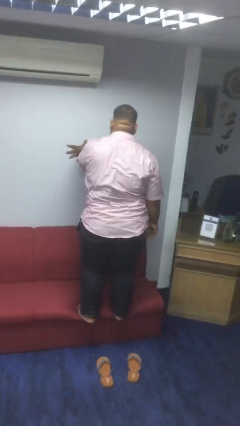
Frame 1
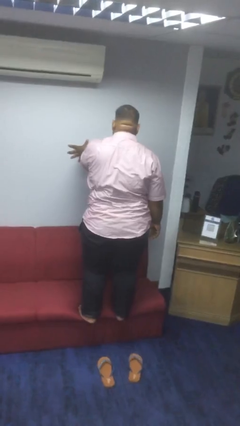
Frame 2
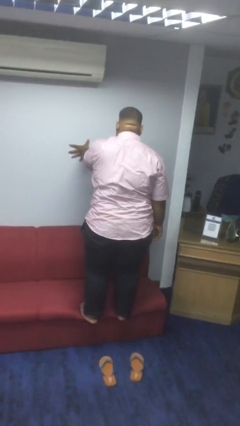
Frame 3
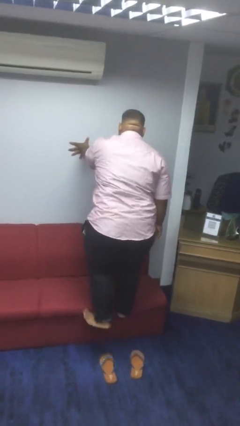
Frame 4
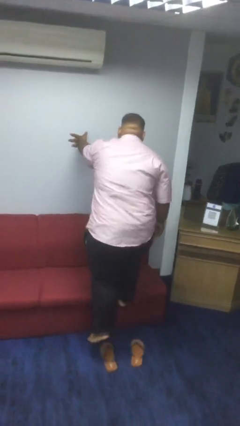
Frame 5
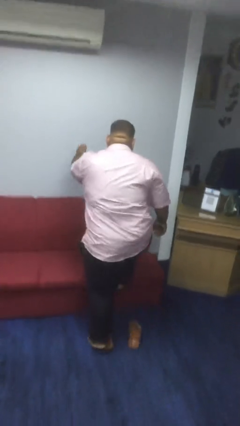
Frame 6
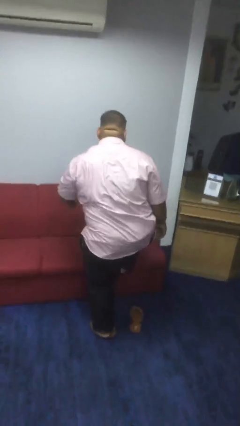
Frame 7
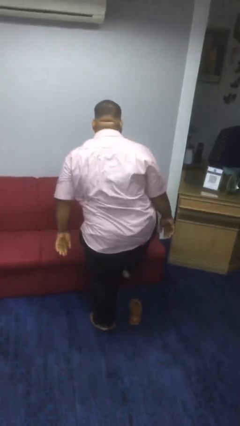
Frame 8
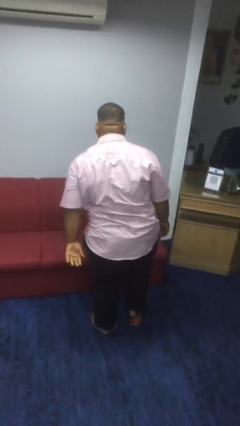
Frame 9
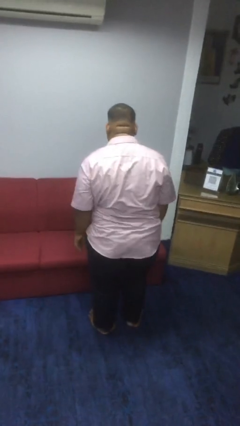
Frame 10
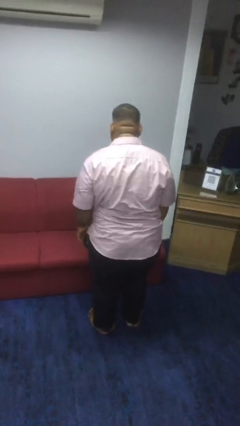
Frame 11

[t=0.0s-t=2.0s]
person climbs off couch

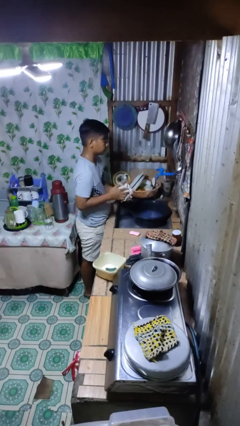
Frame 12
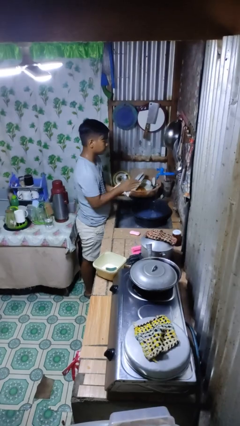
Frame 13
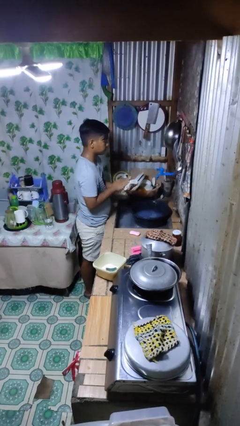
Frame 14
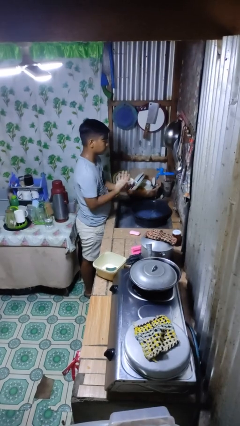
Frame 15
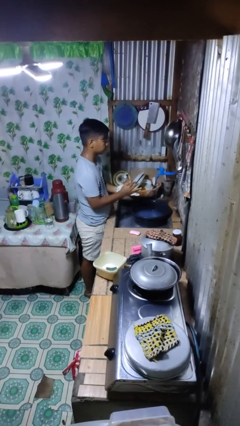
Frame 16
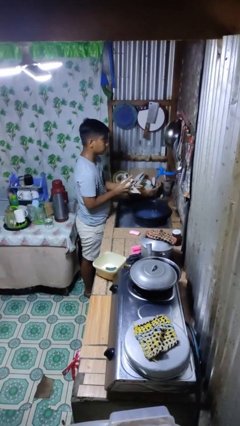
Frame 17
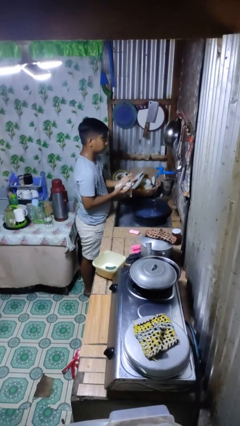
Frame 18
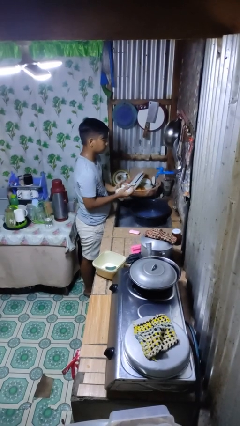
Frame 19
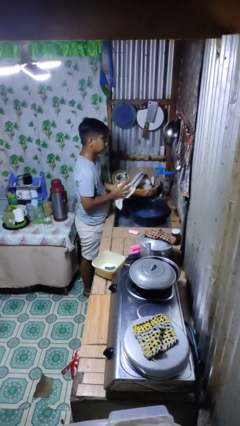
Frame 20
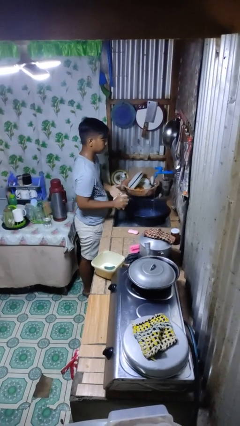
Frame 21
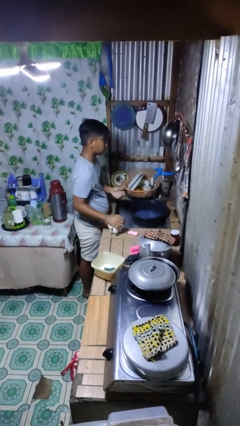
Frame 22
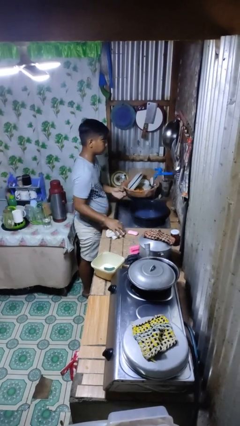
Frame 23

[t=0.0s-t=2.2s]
person dries hands with towel

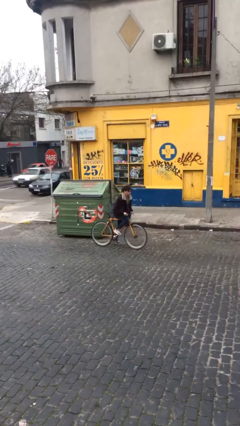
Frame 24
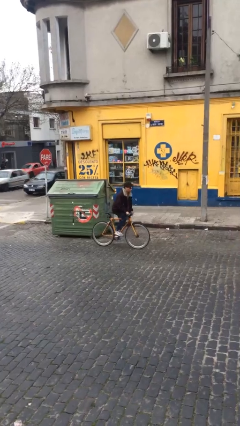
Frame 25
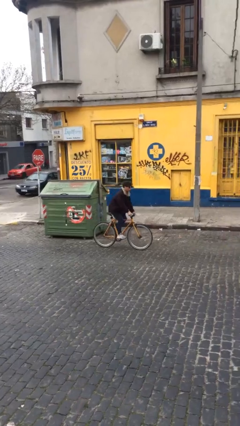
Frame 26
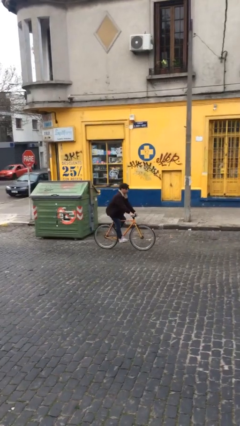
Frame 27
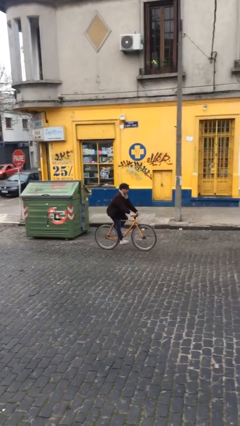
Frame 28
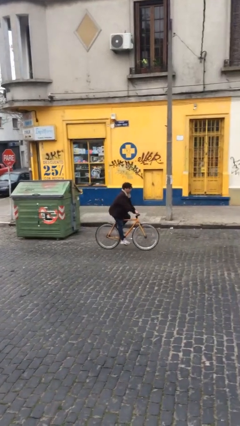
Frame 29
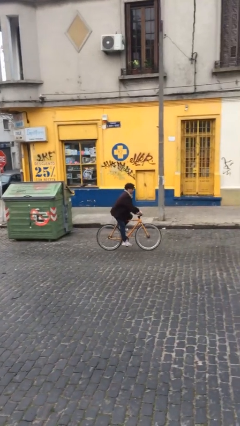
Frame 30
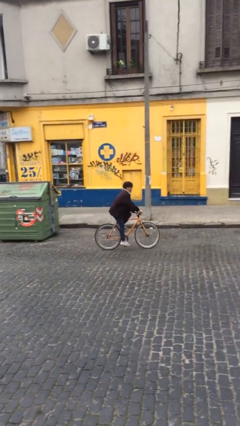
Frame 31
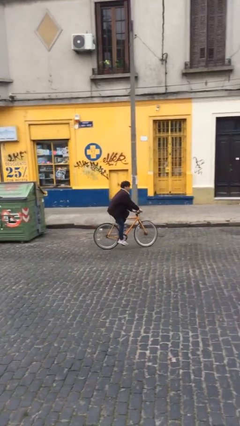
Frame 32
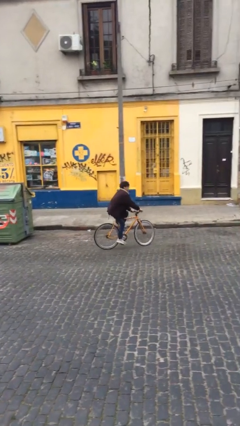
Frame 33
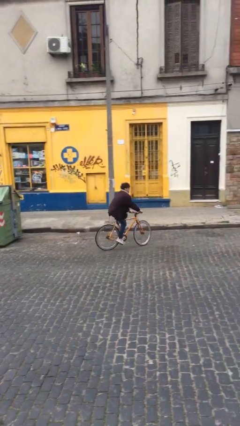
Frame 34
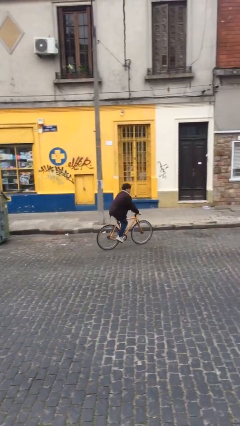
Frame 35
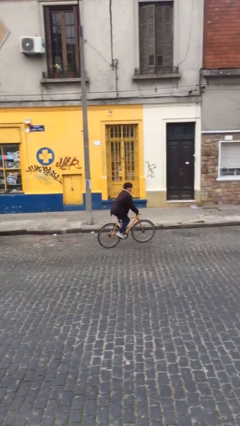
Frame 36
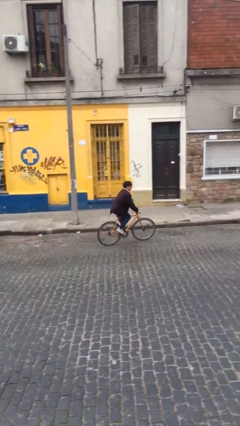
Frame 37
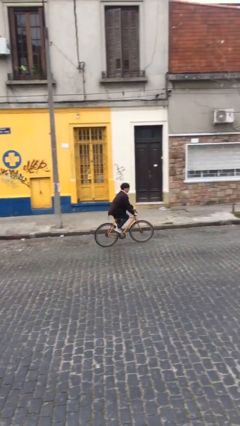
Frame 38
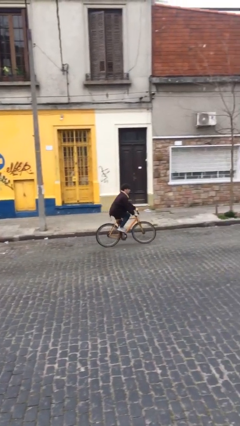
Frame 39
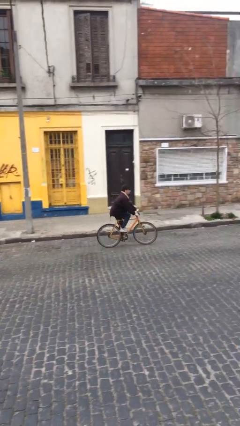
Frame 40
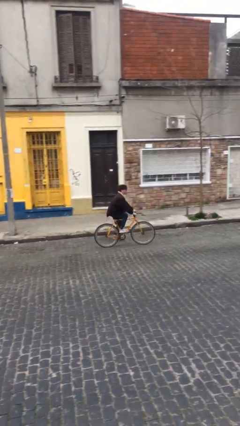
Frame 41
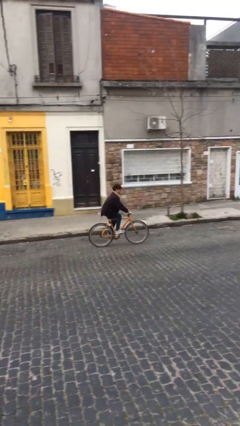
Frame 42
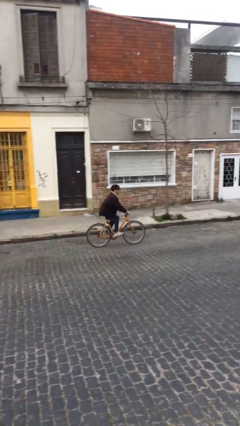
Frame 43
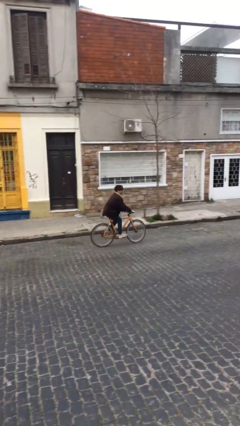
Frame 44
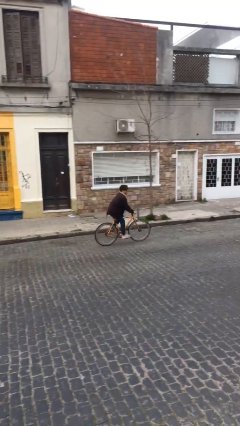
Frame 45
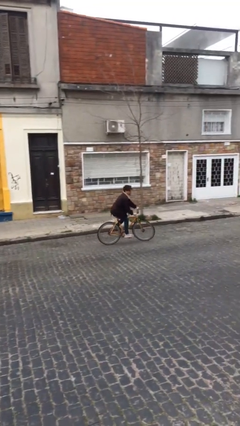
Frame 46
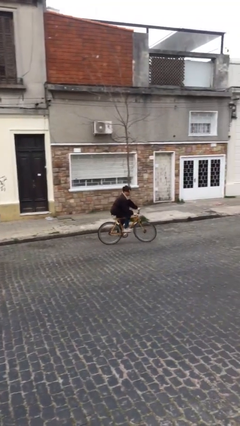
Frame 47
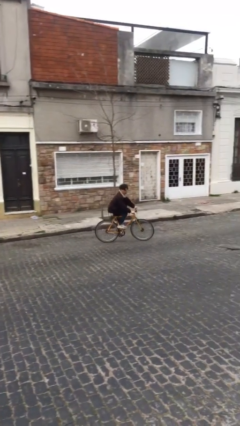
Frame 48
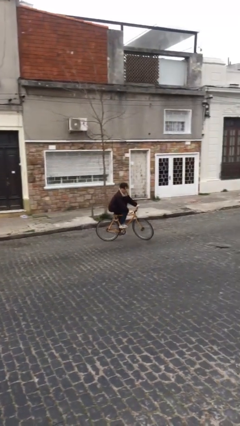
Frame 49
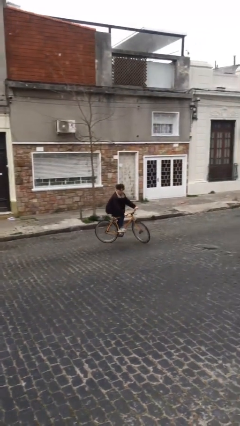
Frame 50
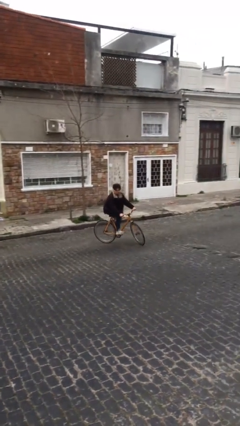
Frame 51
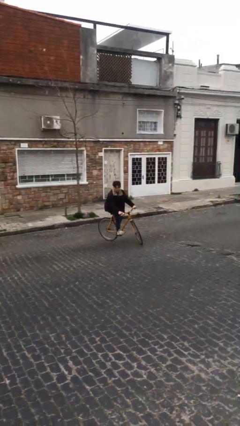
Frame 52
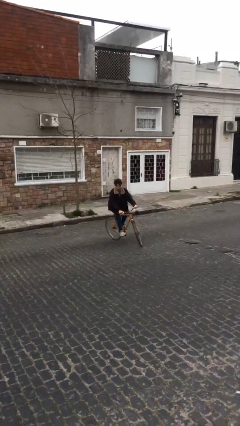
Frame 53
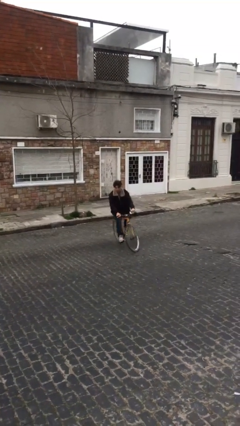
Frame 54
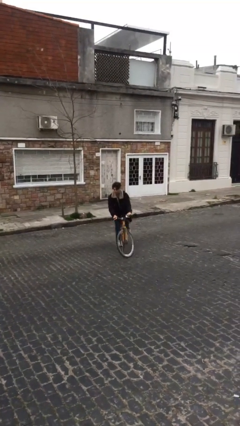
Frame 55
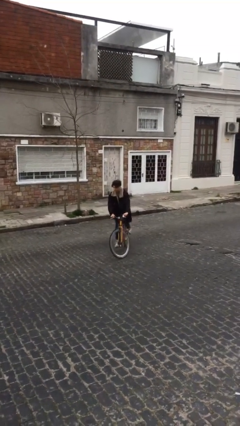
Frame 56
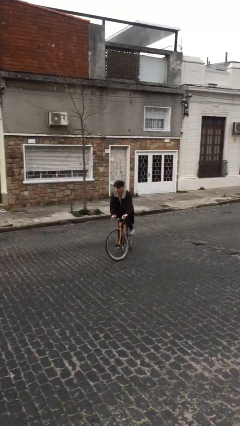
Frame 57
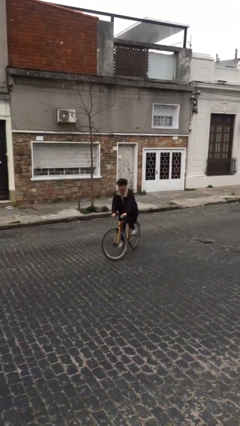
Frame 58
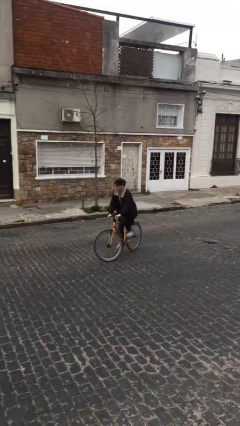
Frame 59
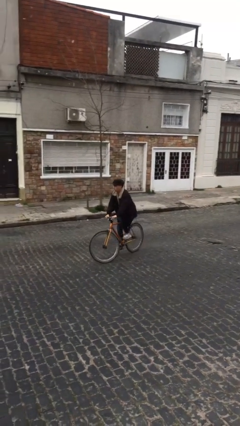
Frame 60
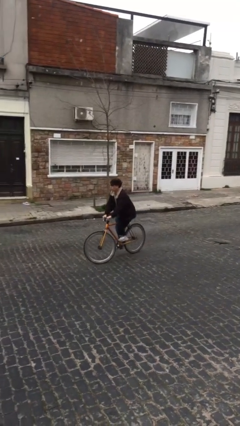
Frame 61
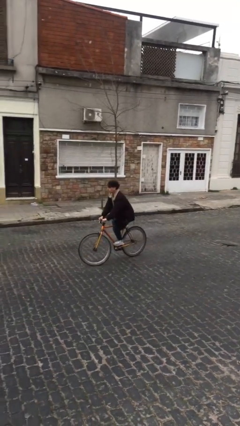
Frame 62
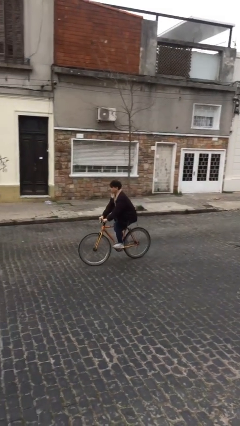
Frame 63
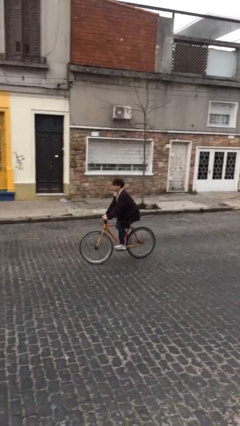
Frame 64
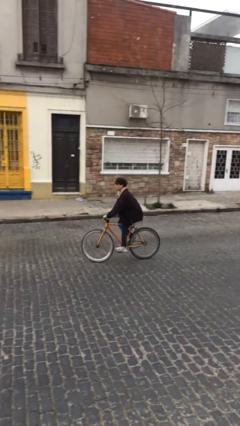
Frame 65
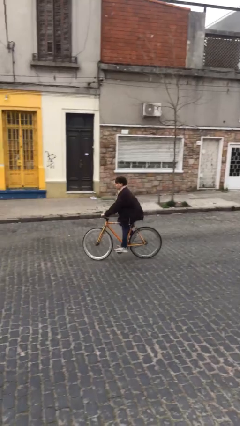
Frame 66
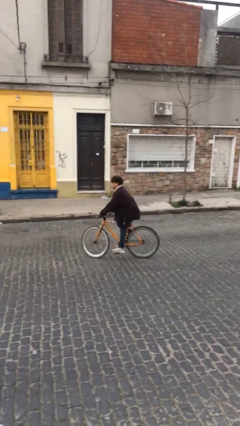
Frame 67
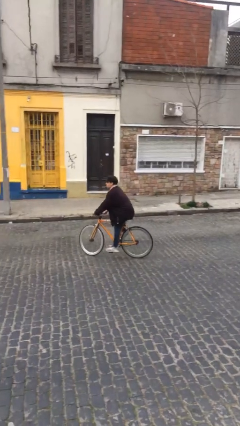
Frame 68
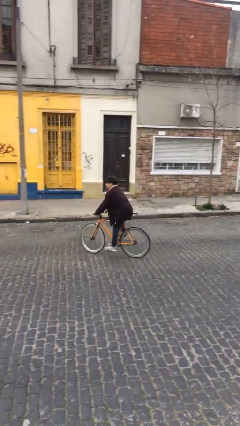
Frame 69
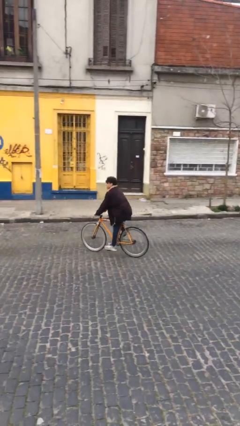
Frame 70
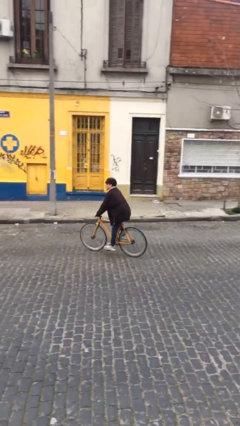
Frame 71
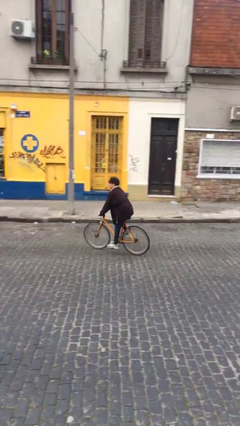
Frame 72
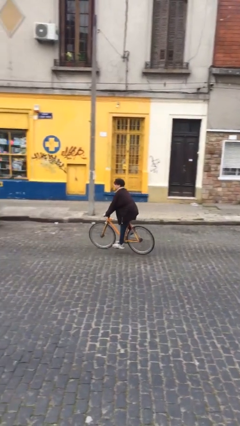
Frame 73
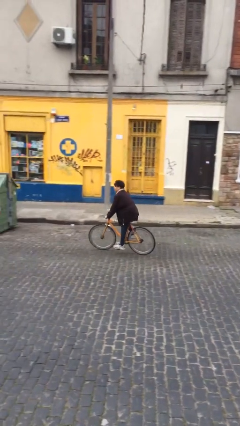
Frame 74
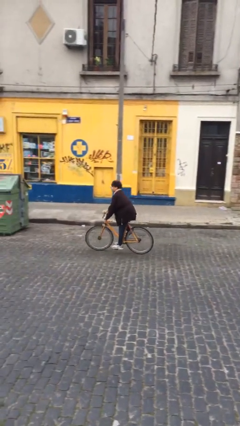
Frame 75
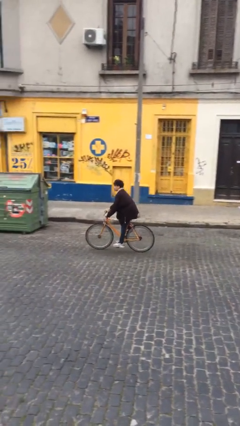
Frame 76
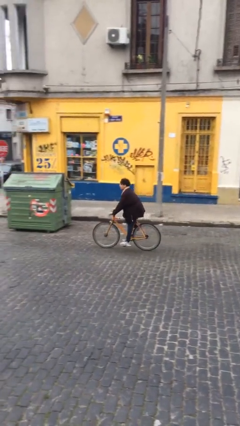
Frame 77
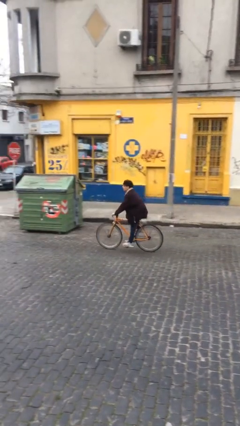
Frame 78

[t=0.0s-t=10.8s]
person rides bicycle

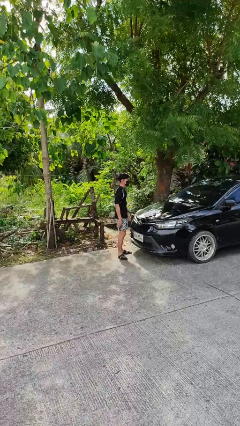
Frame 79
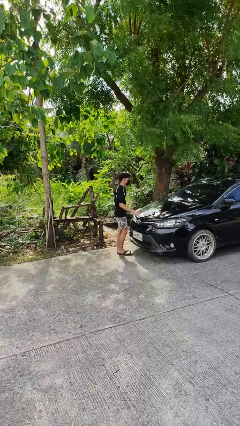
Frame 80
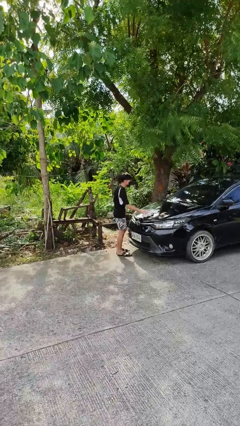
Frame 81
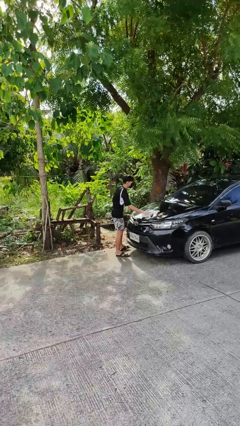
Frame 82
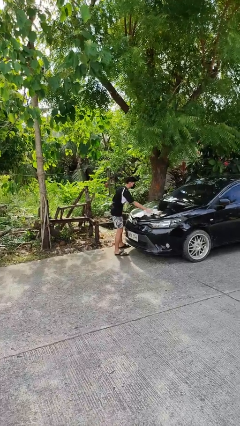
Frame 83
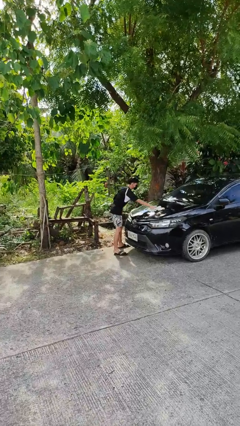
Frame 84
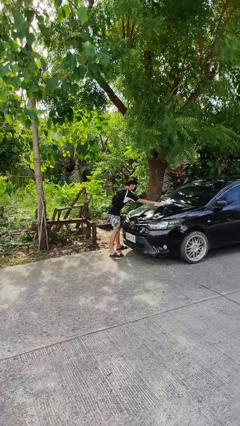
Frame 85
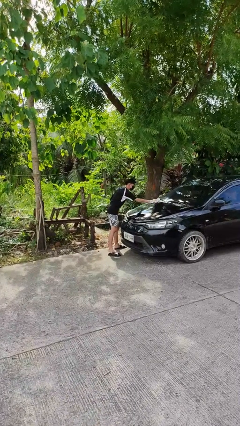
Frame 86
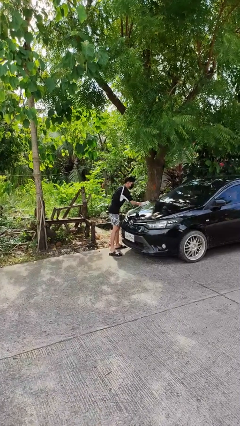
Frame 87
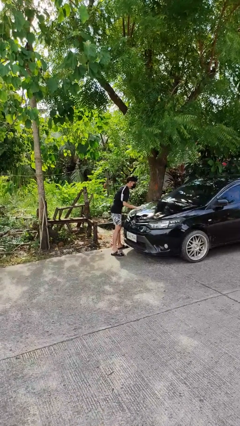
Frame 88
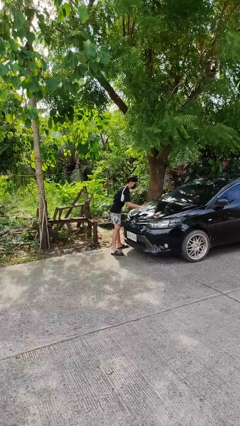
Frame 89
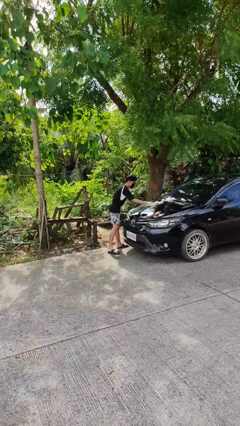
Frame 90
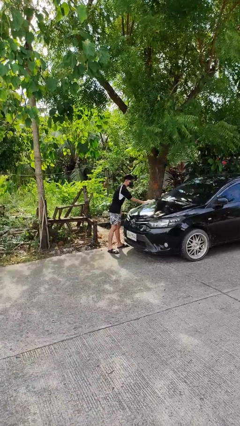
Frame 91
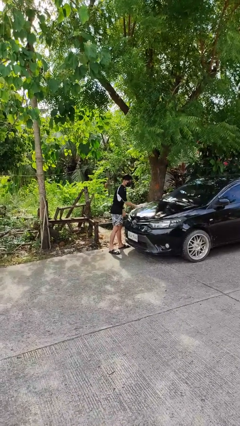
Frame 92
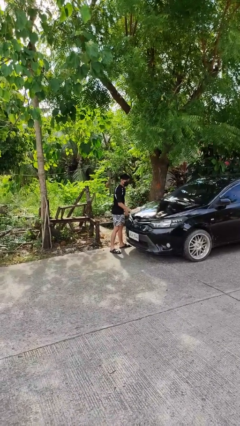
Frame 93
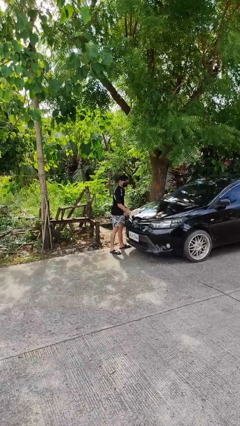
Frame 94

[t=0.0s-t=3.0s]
person polishes car with rag
